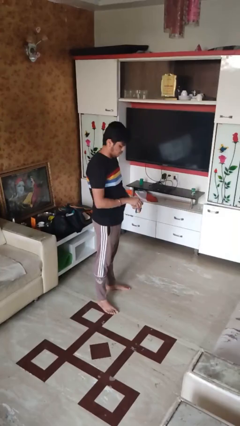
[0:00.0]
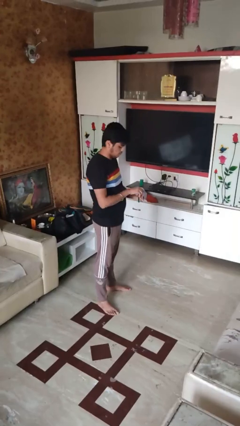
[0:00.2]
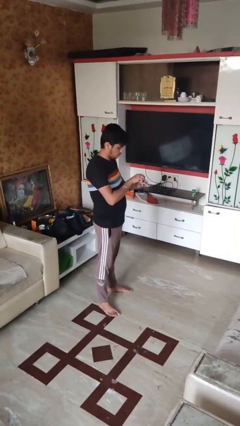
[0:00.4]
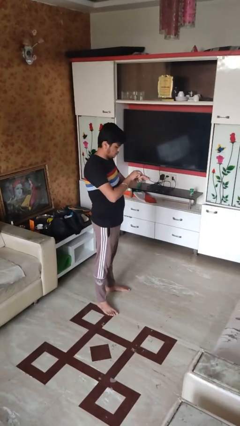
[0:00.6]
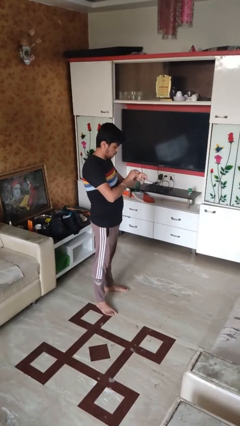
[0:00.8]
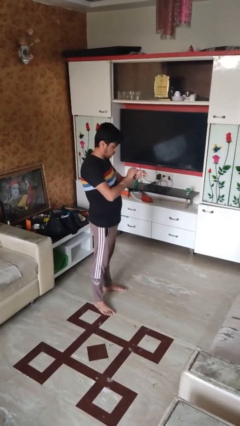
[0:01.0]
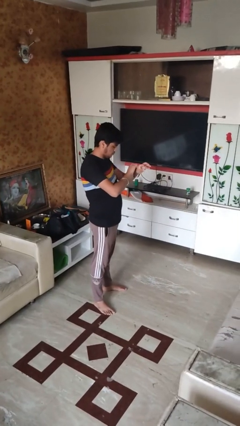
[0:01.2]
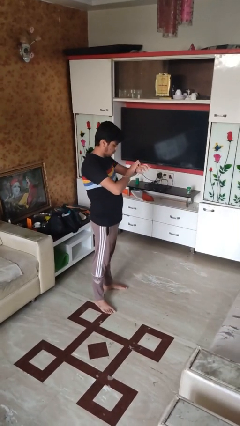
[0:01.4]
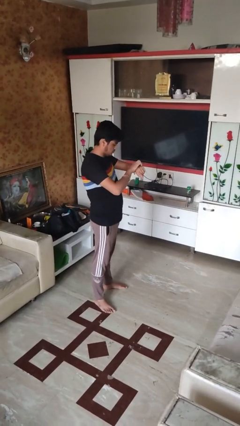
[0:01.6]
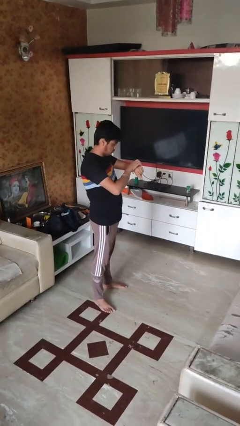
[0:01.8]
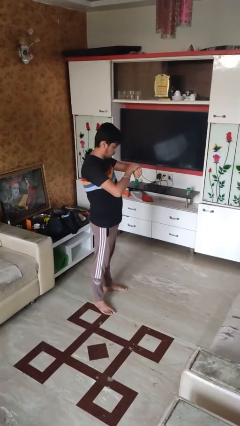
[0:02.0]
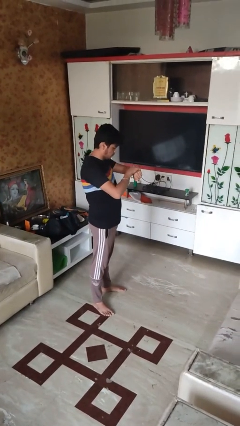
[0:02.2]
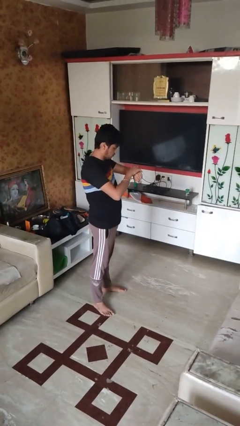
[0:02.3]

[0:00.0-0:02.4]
person puts on wristwatch

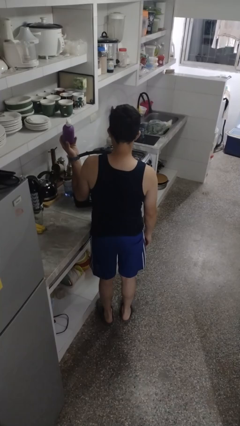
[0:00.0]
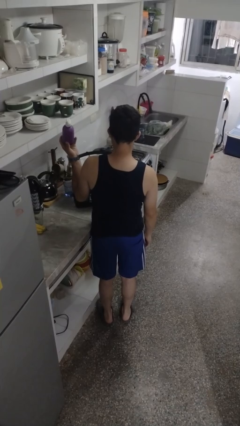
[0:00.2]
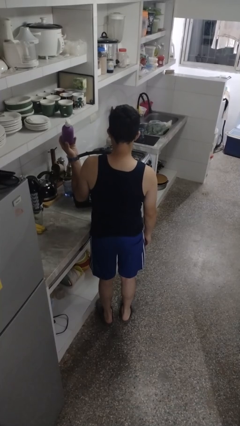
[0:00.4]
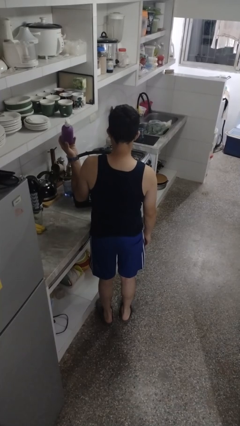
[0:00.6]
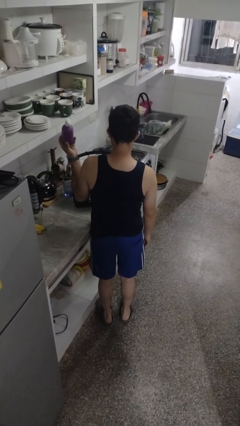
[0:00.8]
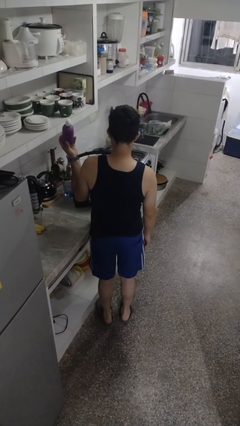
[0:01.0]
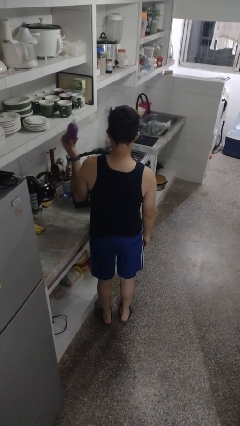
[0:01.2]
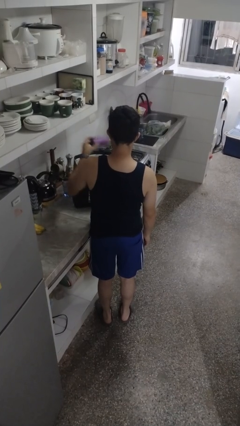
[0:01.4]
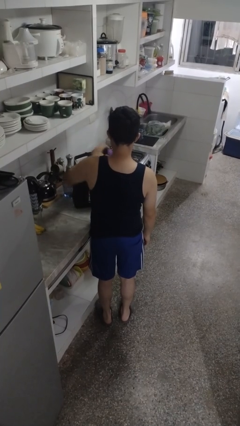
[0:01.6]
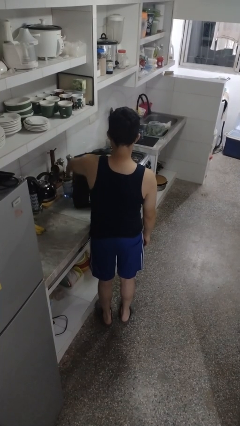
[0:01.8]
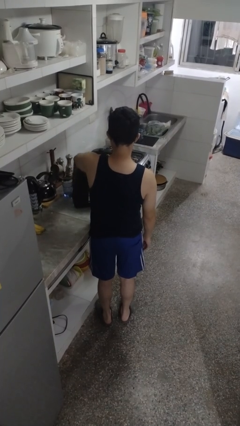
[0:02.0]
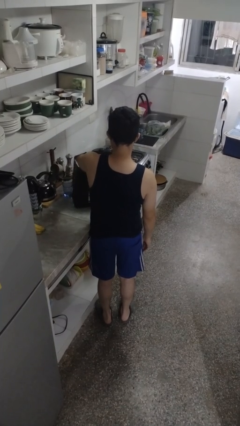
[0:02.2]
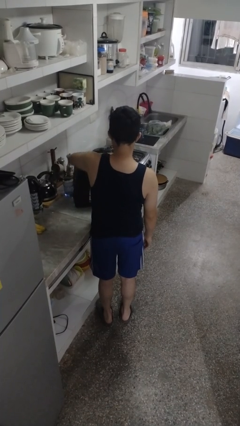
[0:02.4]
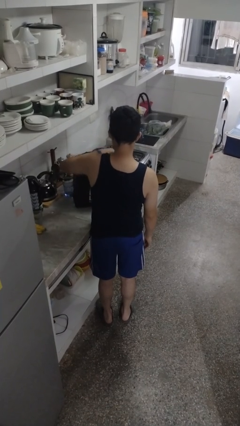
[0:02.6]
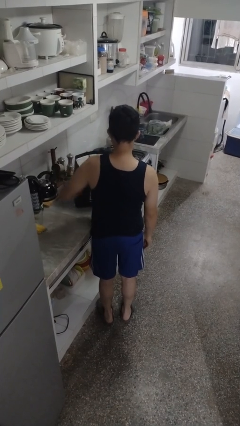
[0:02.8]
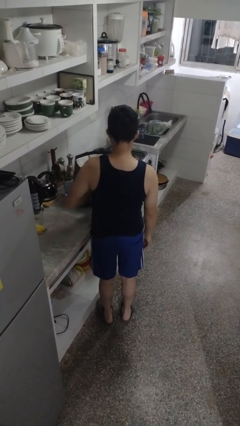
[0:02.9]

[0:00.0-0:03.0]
person puts object into bag

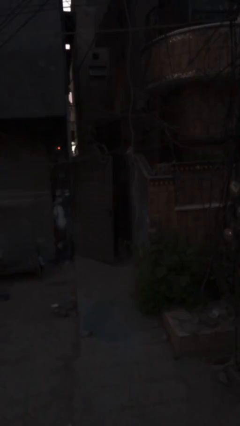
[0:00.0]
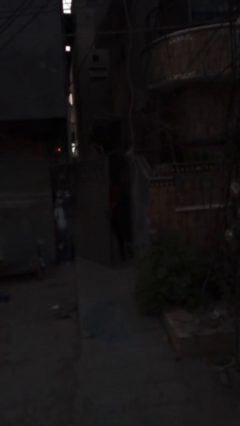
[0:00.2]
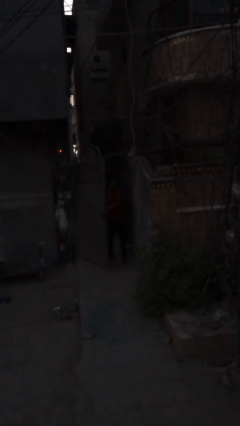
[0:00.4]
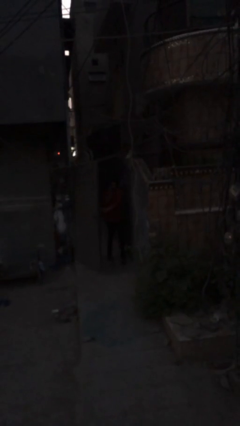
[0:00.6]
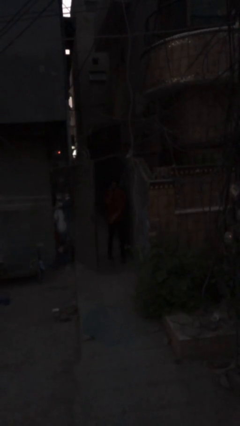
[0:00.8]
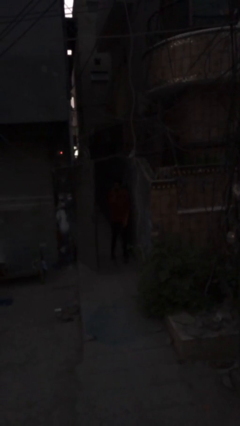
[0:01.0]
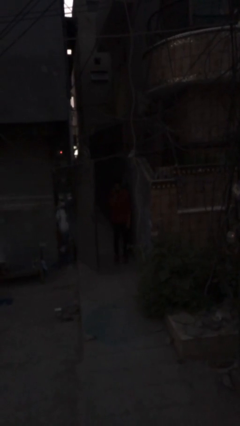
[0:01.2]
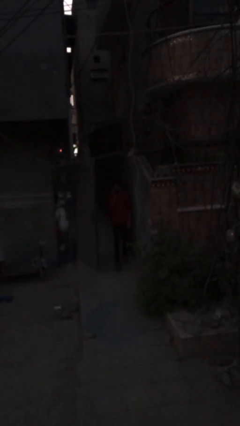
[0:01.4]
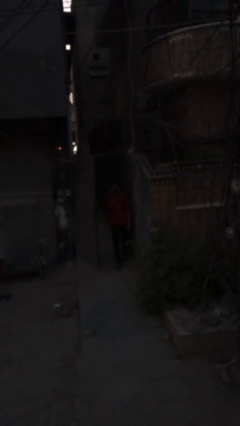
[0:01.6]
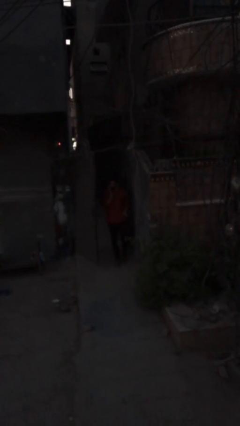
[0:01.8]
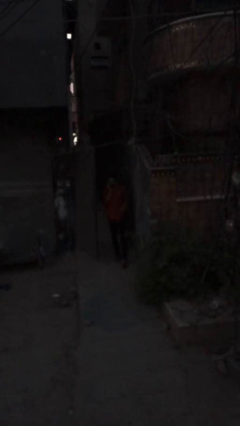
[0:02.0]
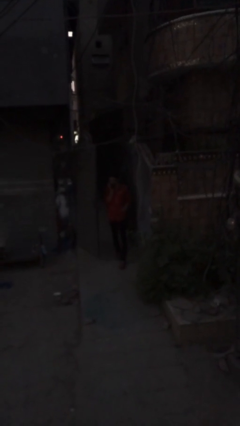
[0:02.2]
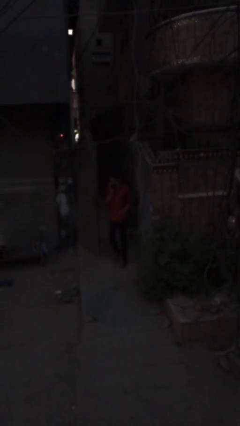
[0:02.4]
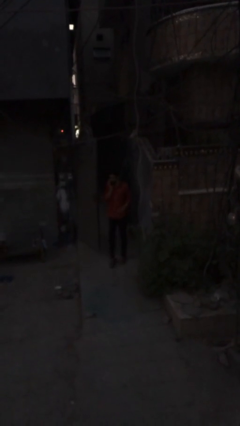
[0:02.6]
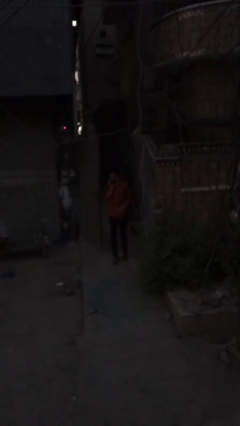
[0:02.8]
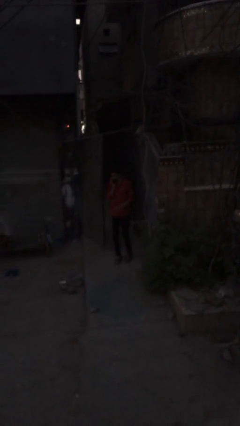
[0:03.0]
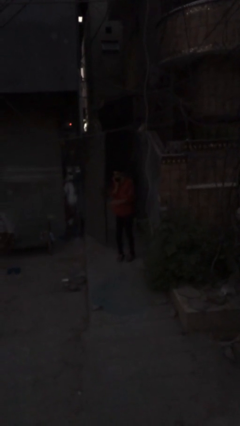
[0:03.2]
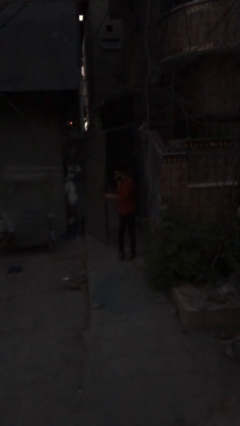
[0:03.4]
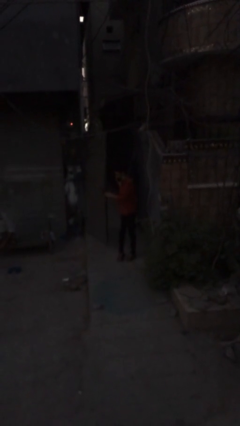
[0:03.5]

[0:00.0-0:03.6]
person enters scene through structure

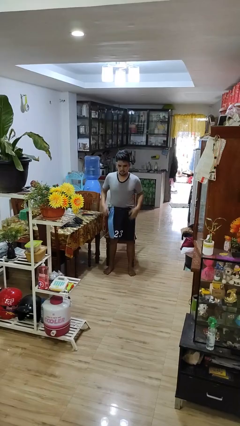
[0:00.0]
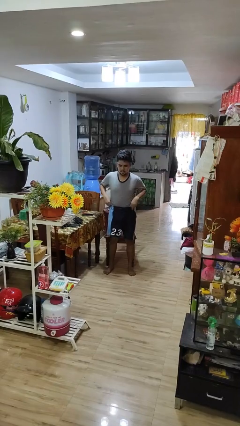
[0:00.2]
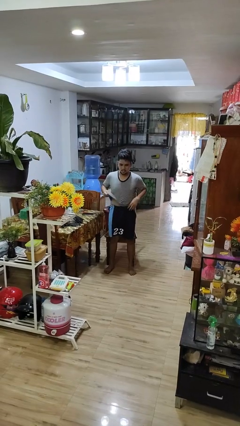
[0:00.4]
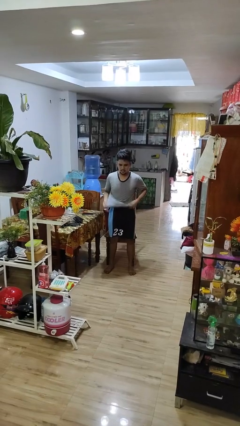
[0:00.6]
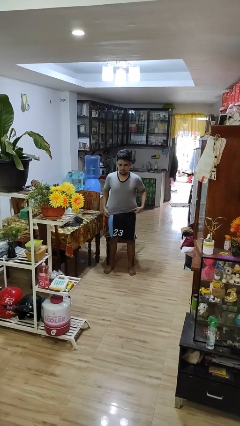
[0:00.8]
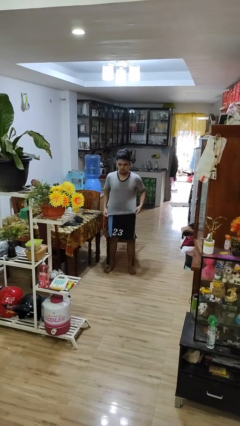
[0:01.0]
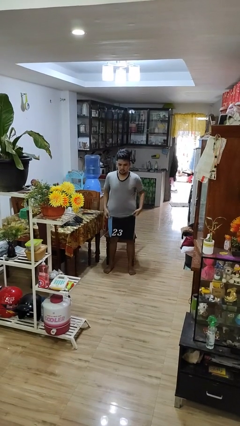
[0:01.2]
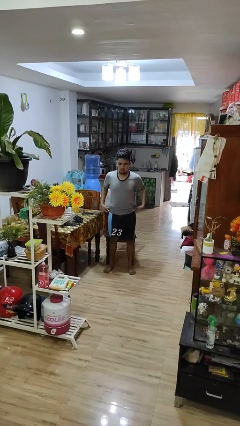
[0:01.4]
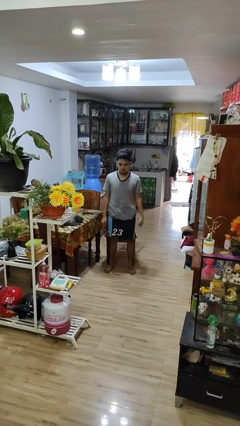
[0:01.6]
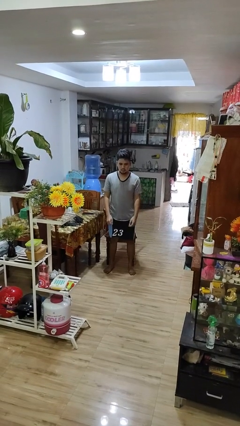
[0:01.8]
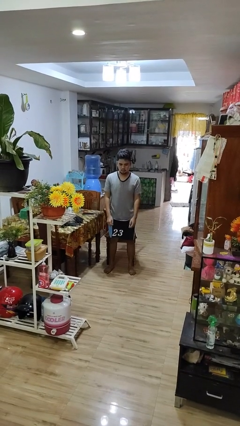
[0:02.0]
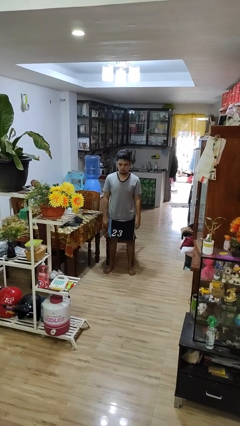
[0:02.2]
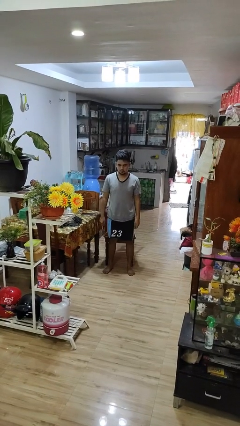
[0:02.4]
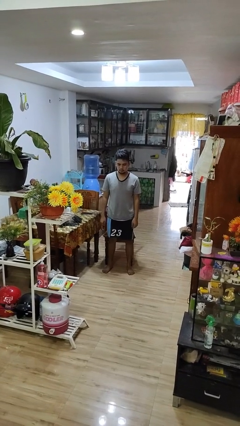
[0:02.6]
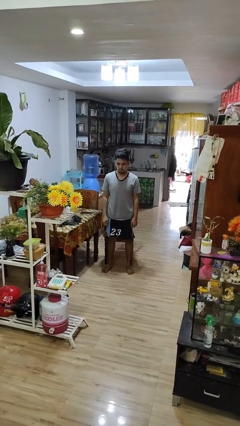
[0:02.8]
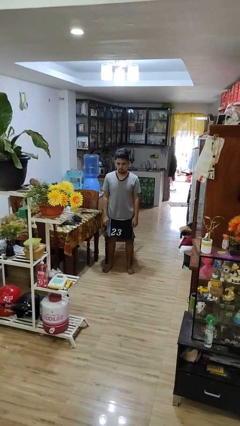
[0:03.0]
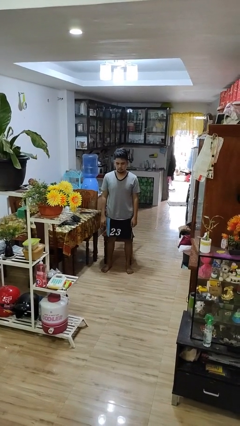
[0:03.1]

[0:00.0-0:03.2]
person untucks shirt

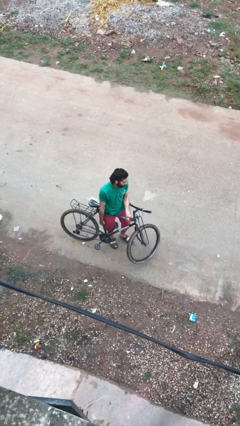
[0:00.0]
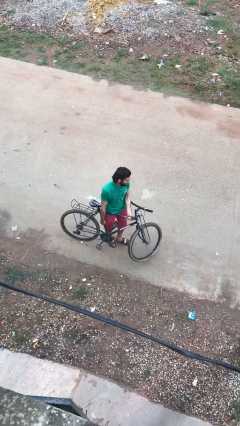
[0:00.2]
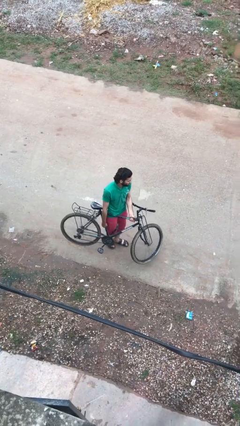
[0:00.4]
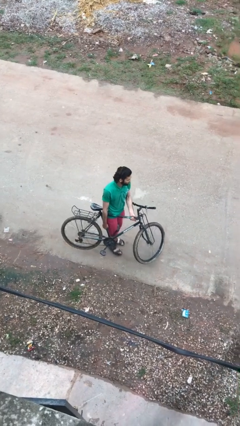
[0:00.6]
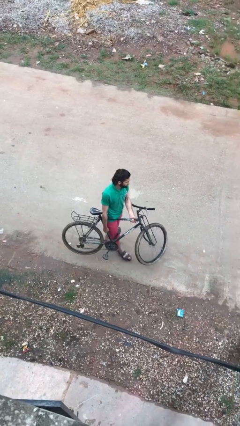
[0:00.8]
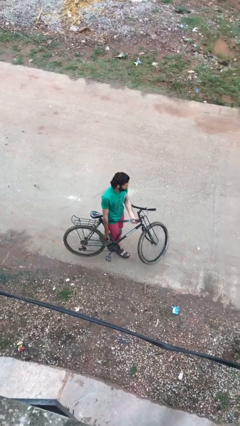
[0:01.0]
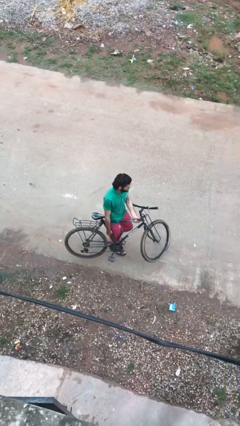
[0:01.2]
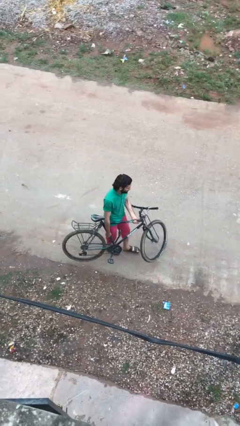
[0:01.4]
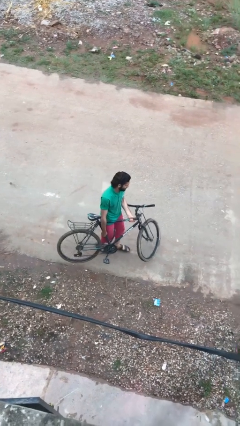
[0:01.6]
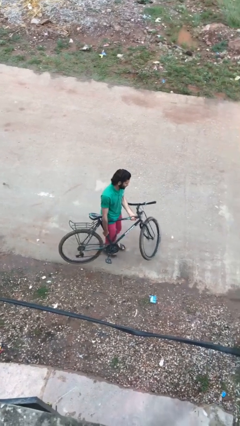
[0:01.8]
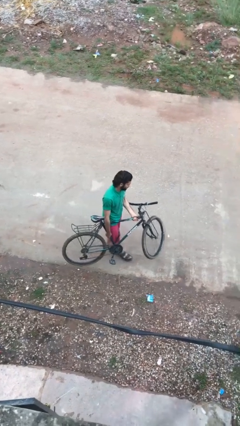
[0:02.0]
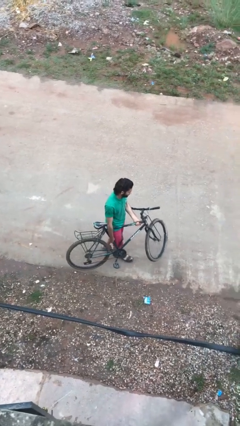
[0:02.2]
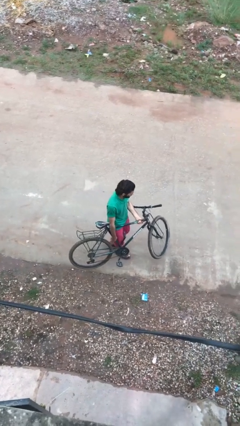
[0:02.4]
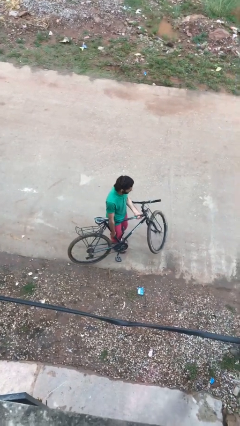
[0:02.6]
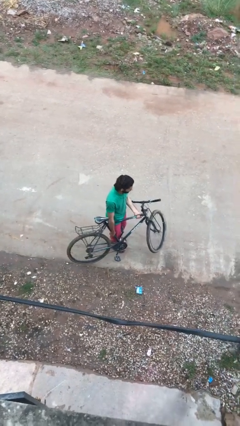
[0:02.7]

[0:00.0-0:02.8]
person carries bicycle

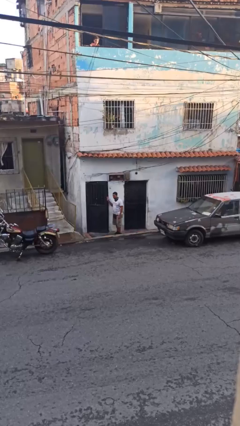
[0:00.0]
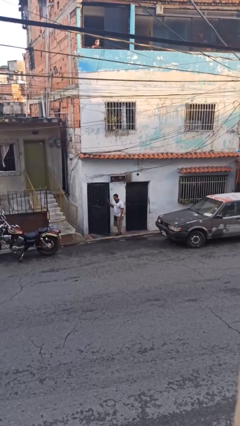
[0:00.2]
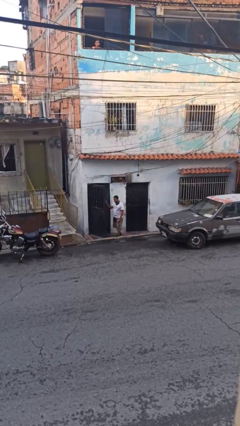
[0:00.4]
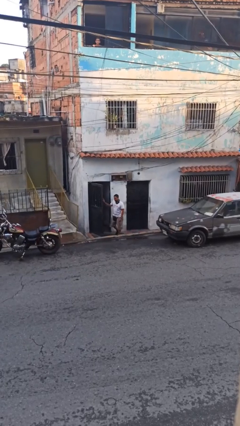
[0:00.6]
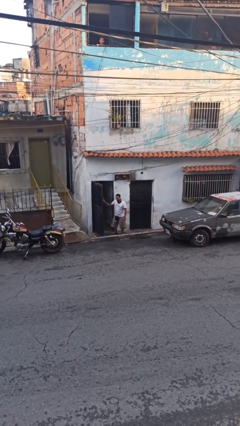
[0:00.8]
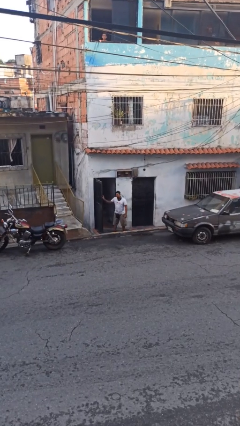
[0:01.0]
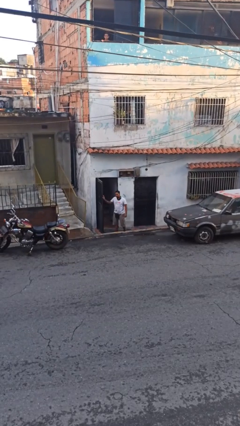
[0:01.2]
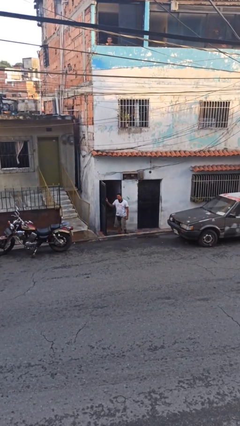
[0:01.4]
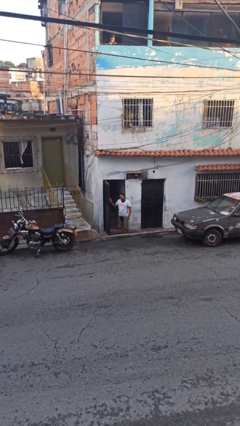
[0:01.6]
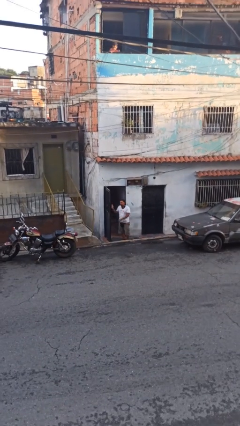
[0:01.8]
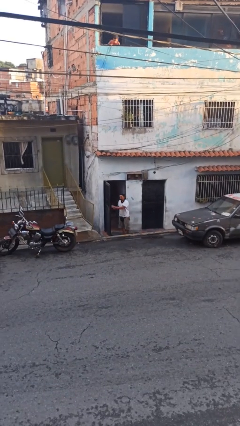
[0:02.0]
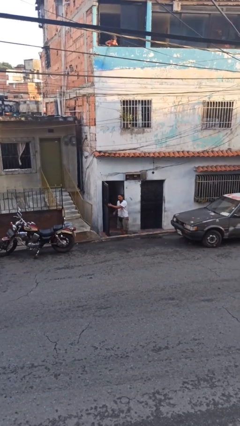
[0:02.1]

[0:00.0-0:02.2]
person opens facility door
